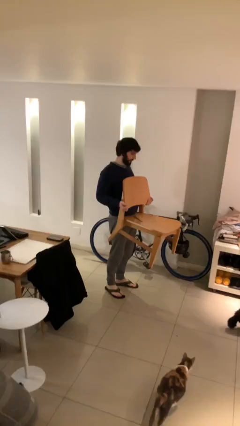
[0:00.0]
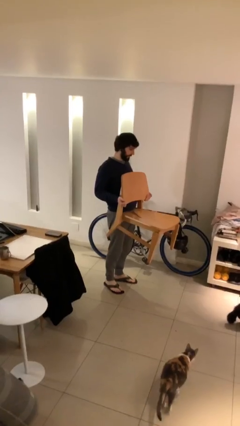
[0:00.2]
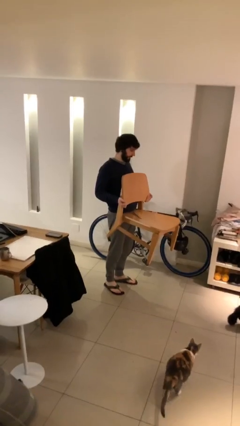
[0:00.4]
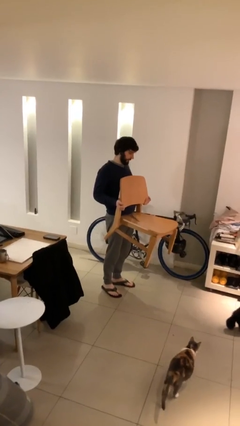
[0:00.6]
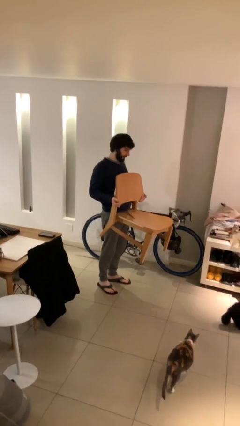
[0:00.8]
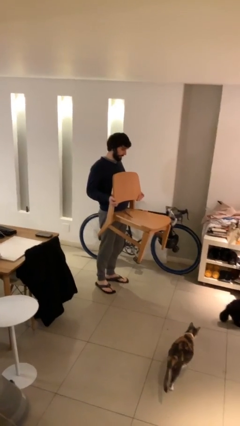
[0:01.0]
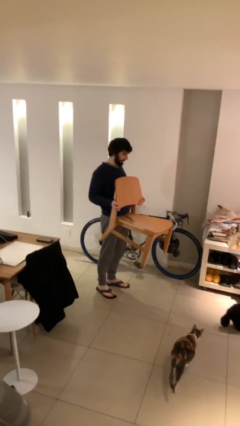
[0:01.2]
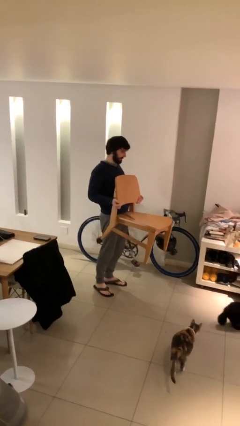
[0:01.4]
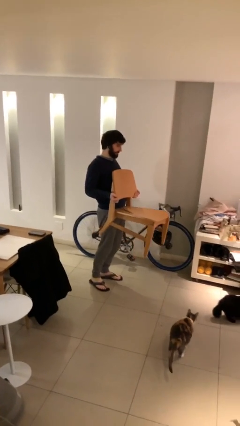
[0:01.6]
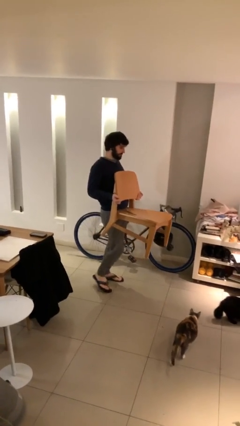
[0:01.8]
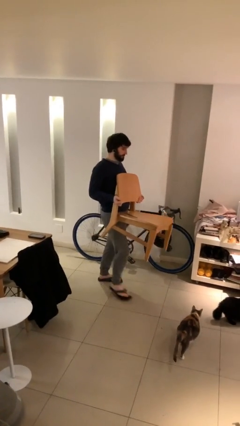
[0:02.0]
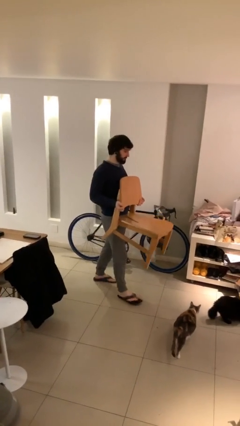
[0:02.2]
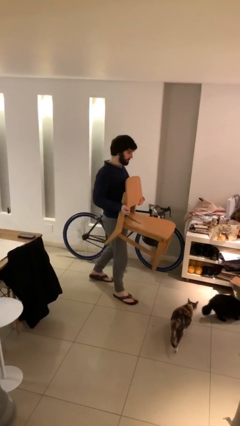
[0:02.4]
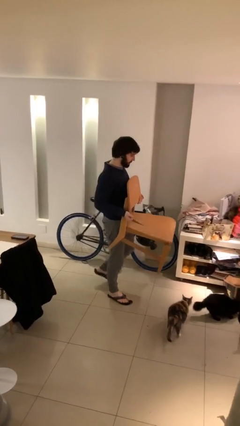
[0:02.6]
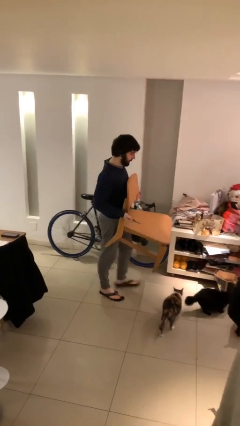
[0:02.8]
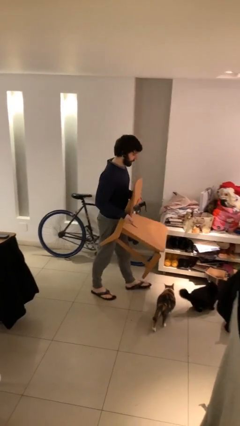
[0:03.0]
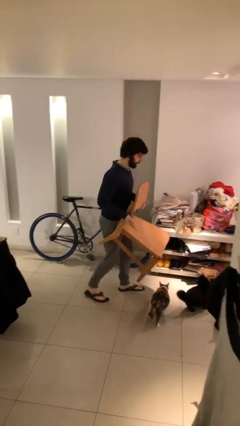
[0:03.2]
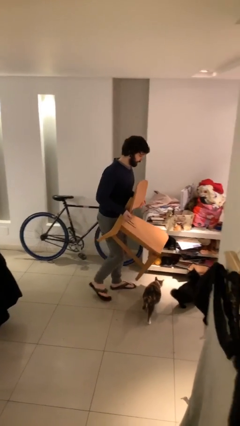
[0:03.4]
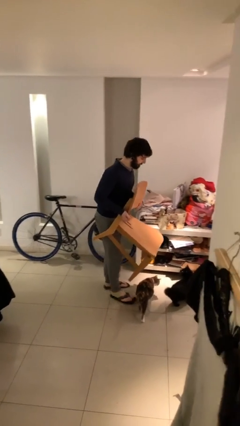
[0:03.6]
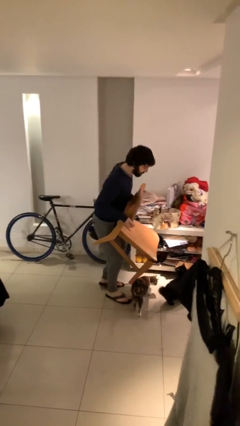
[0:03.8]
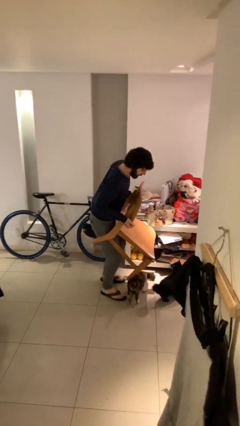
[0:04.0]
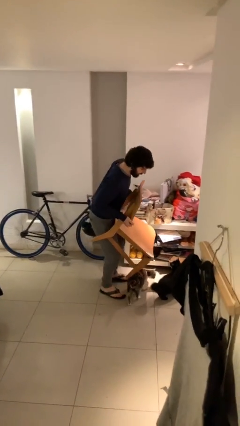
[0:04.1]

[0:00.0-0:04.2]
person carries heavy object

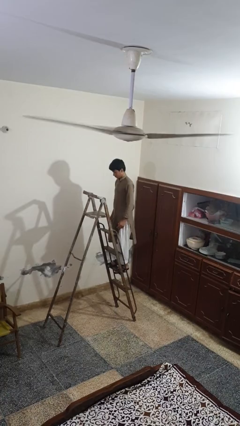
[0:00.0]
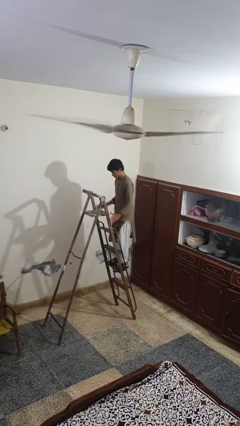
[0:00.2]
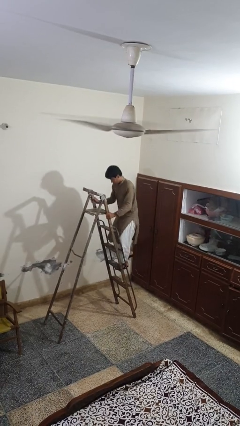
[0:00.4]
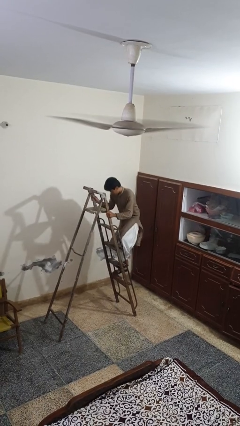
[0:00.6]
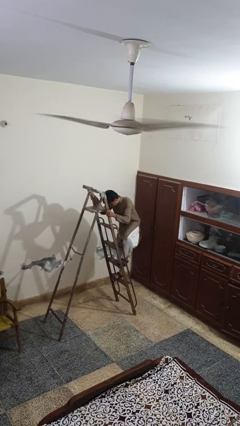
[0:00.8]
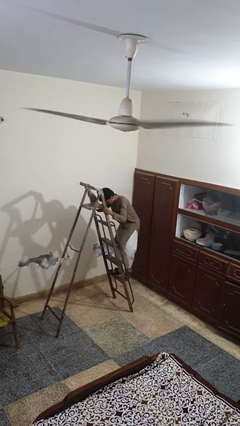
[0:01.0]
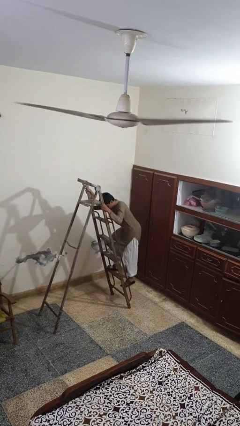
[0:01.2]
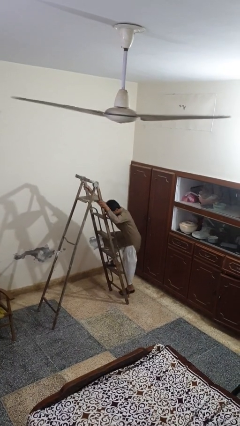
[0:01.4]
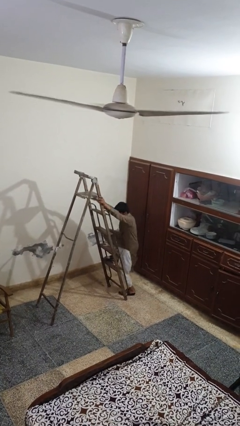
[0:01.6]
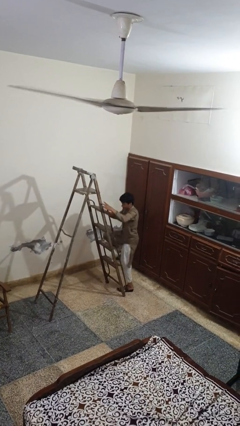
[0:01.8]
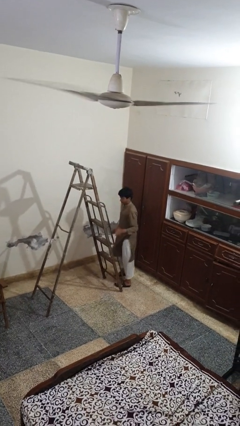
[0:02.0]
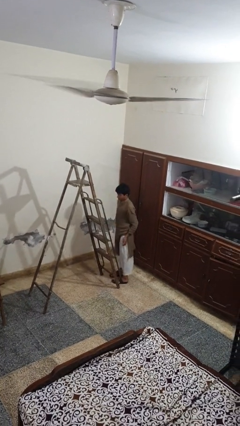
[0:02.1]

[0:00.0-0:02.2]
person climbs down ladder

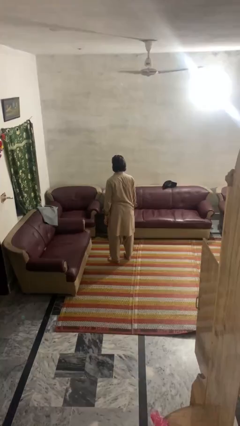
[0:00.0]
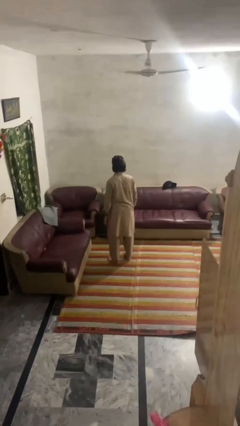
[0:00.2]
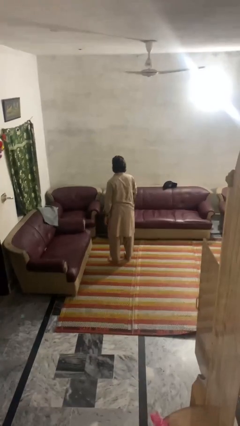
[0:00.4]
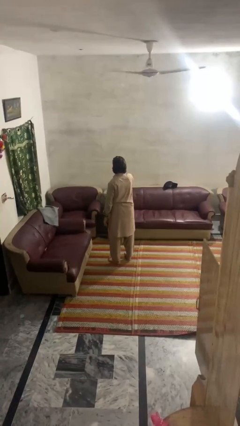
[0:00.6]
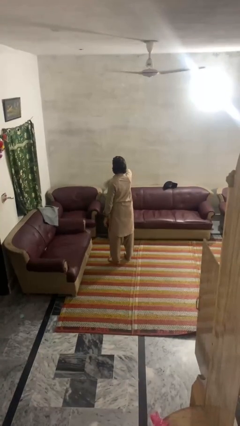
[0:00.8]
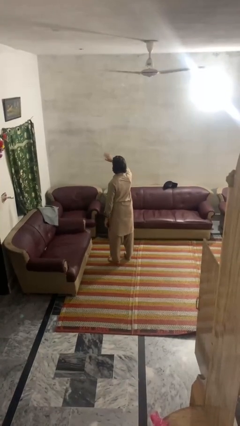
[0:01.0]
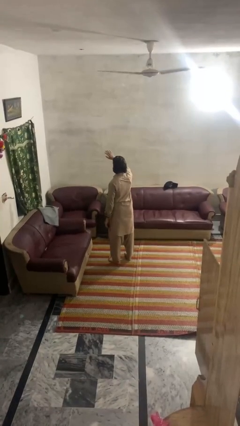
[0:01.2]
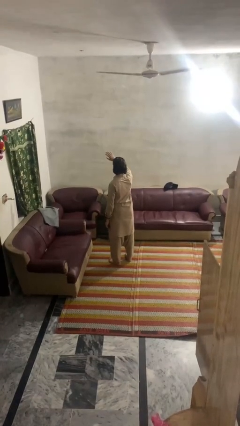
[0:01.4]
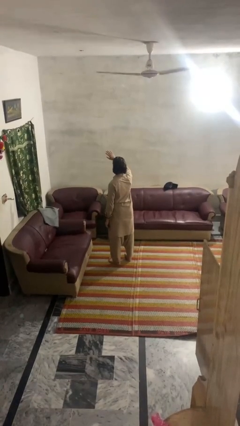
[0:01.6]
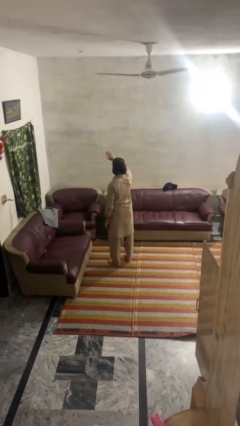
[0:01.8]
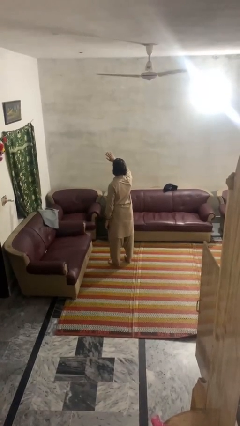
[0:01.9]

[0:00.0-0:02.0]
person gestures swipe up

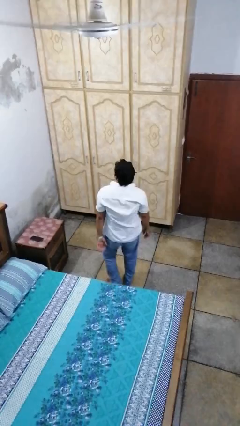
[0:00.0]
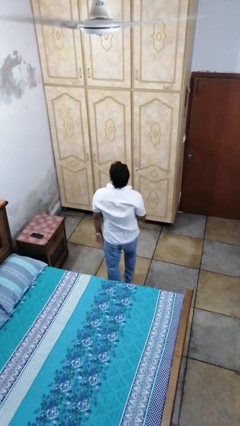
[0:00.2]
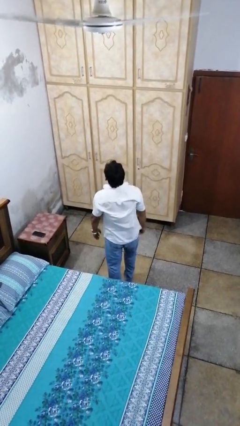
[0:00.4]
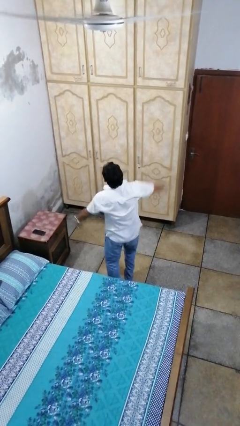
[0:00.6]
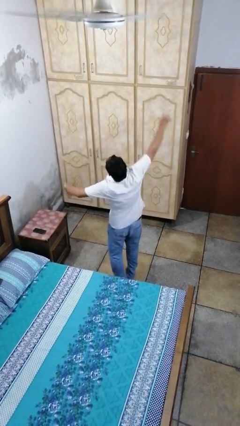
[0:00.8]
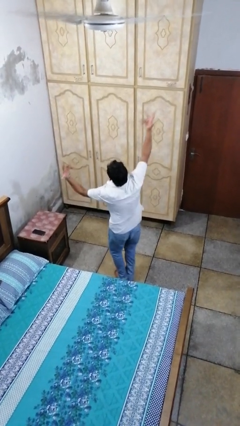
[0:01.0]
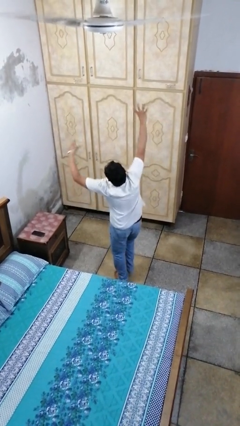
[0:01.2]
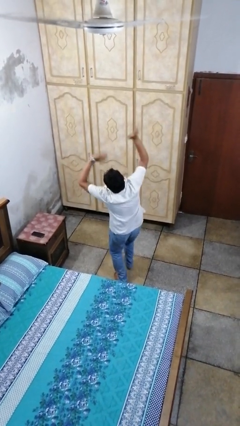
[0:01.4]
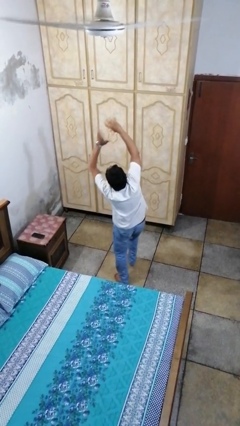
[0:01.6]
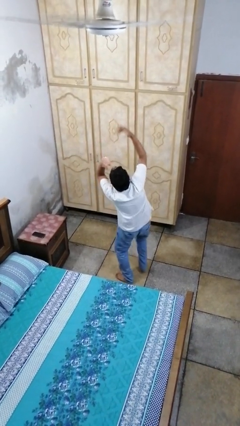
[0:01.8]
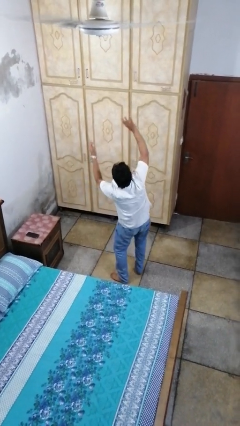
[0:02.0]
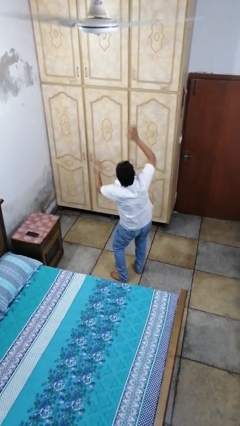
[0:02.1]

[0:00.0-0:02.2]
person dances in place

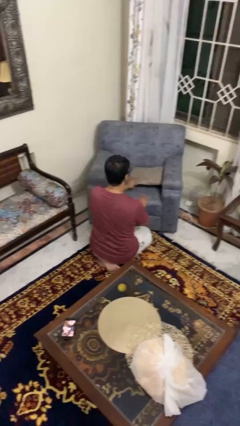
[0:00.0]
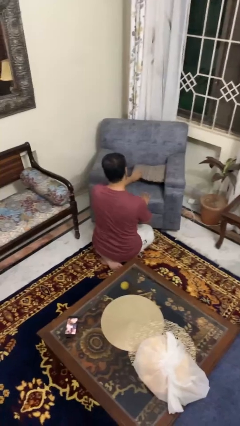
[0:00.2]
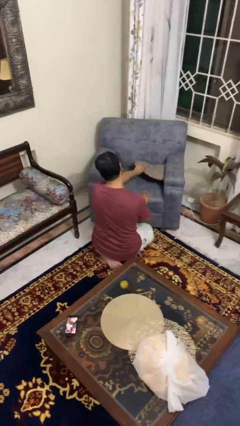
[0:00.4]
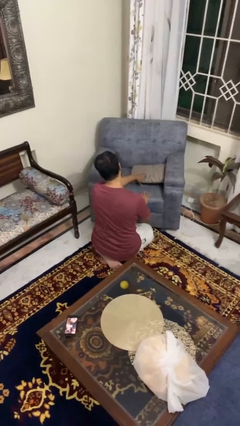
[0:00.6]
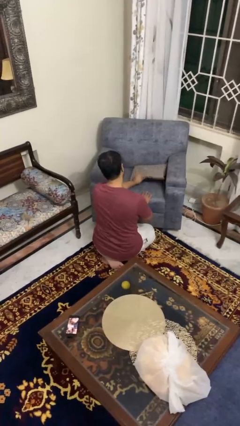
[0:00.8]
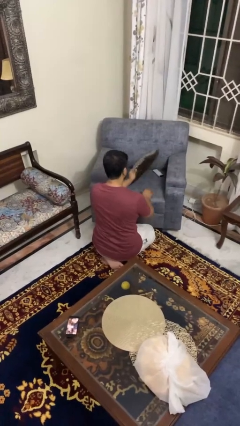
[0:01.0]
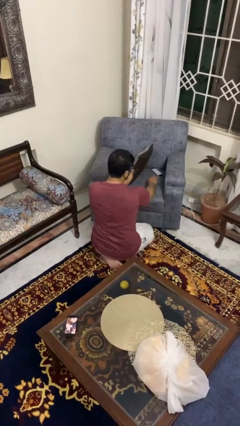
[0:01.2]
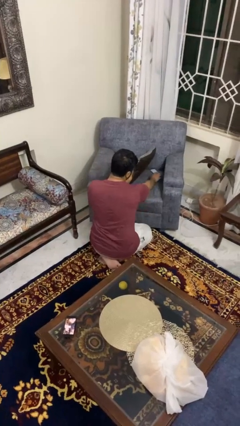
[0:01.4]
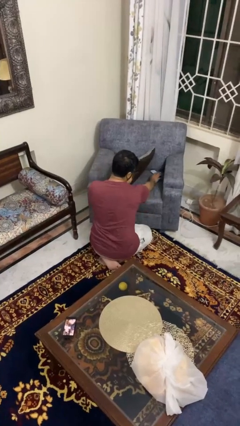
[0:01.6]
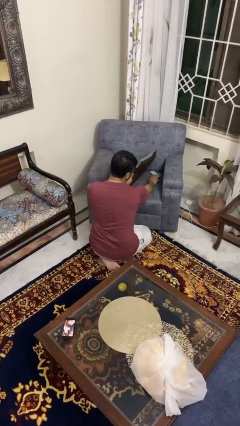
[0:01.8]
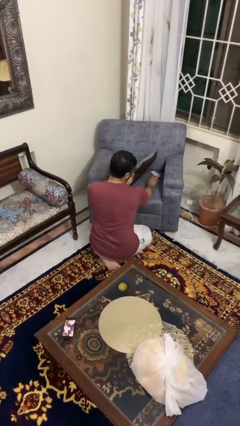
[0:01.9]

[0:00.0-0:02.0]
person searches in couch

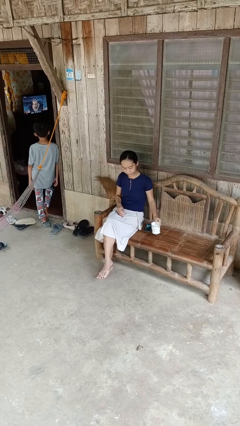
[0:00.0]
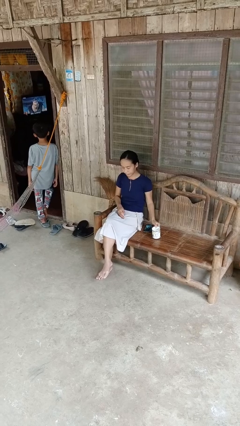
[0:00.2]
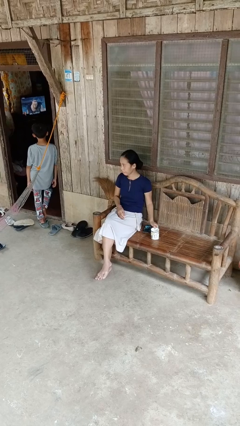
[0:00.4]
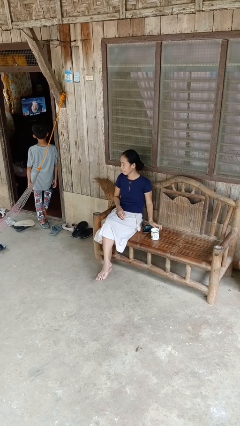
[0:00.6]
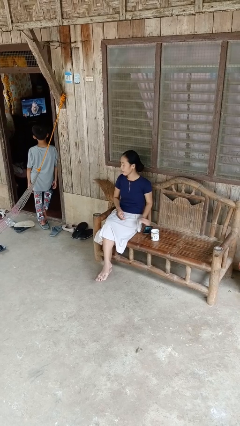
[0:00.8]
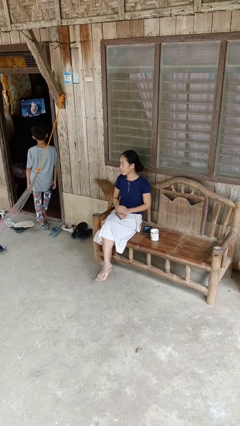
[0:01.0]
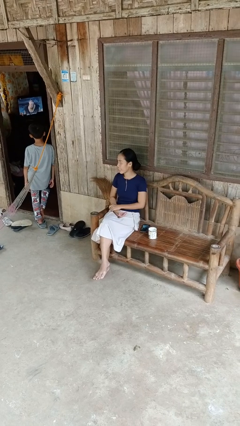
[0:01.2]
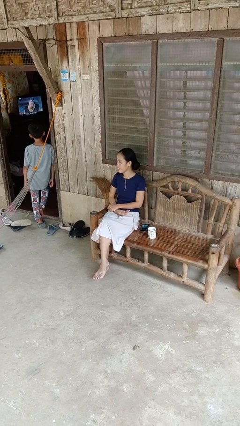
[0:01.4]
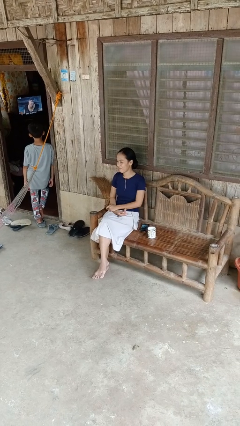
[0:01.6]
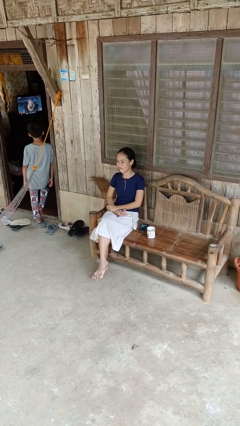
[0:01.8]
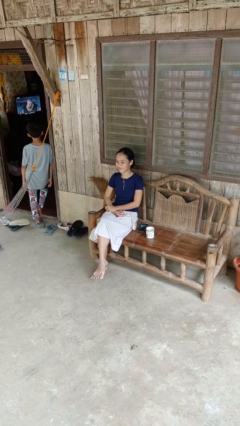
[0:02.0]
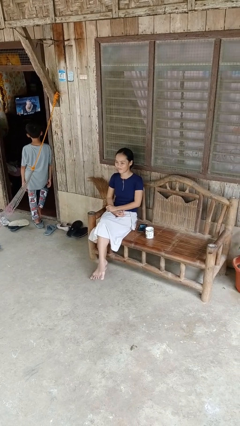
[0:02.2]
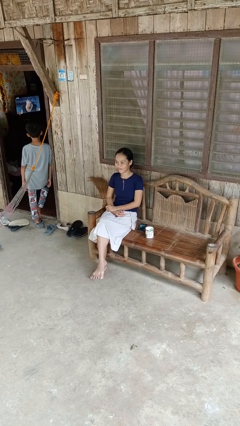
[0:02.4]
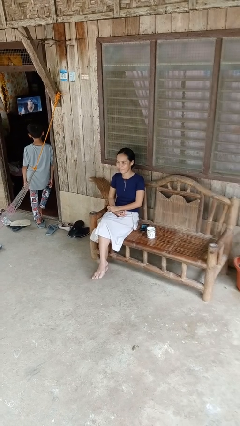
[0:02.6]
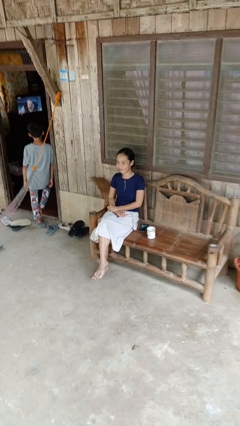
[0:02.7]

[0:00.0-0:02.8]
person puts down object on table

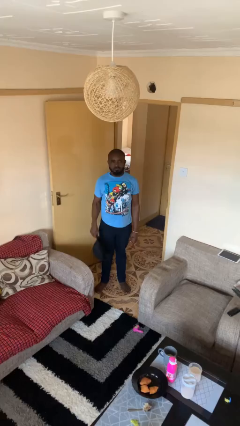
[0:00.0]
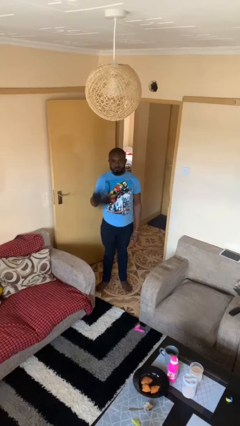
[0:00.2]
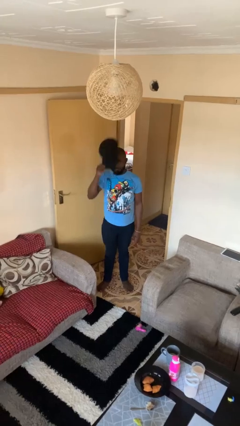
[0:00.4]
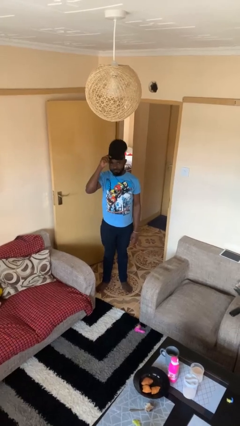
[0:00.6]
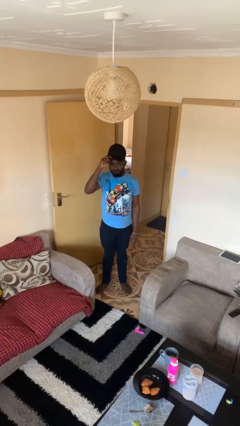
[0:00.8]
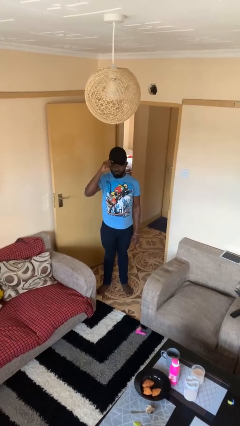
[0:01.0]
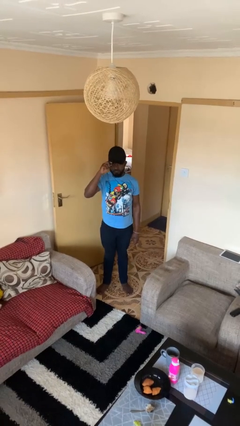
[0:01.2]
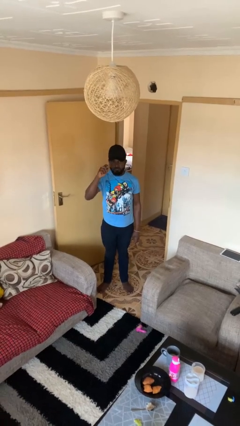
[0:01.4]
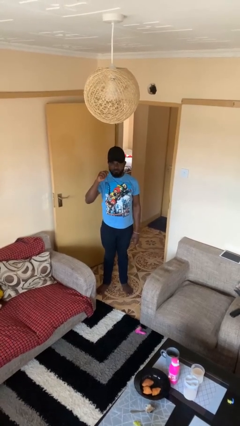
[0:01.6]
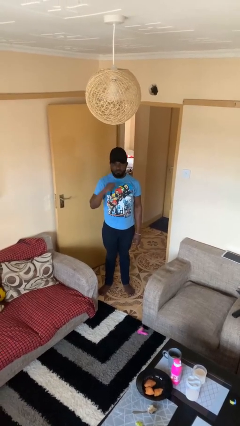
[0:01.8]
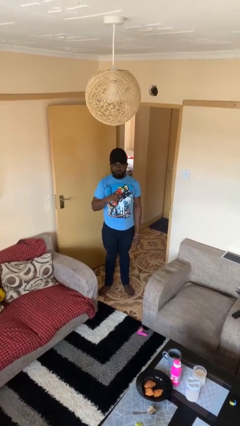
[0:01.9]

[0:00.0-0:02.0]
person puts on hat
